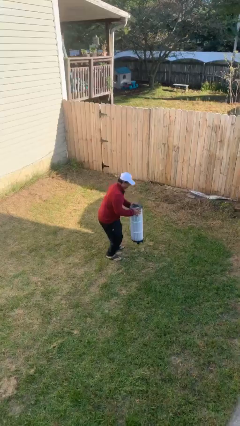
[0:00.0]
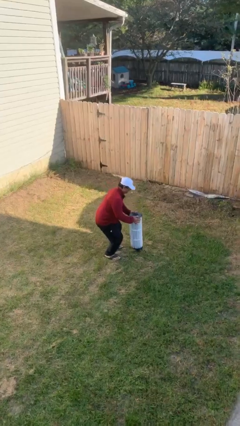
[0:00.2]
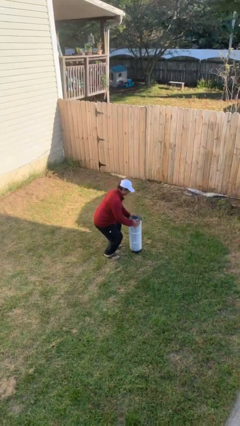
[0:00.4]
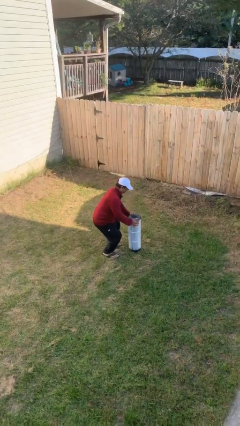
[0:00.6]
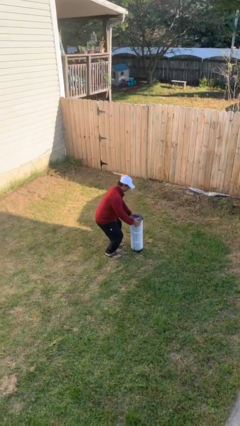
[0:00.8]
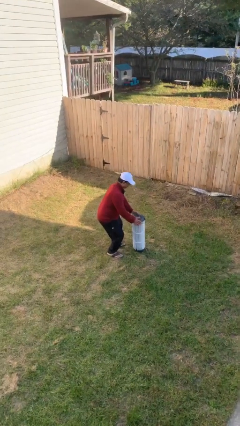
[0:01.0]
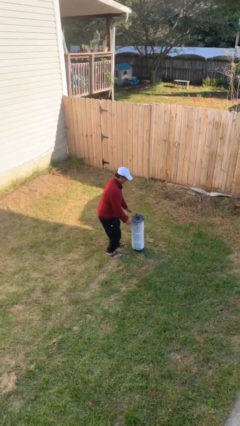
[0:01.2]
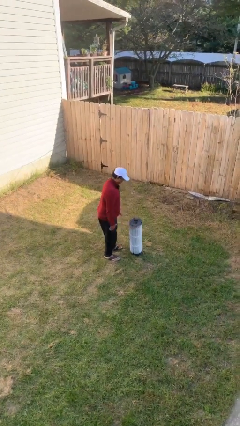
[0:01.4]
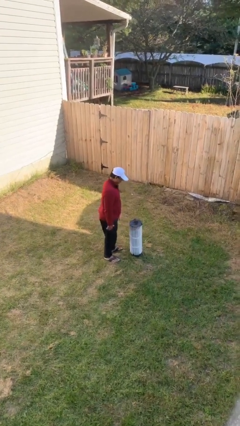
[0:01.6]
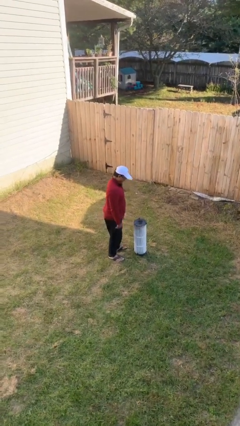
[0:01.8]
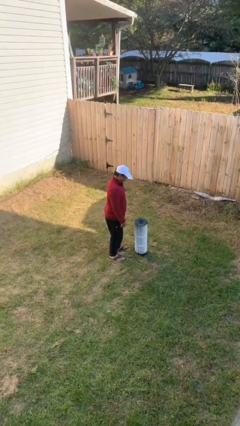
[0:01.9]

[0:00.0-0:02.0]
person puts down object on floor

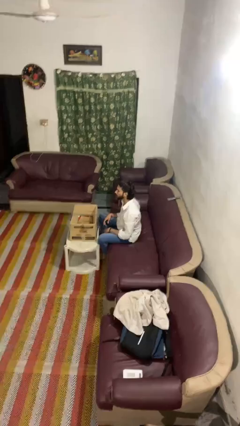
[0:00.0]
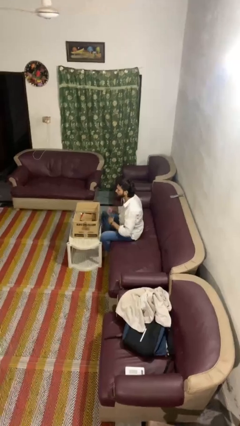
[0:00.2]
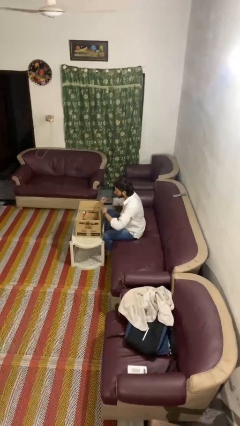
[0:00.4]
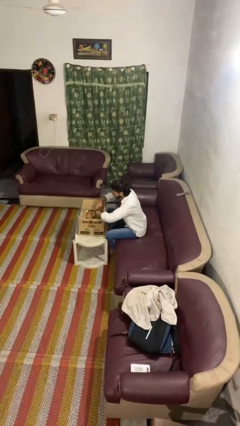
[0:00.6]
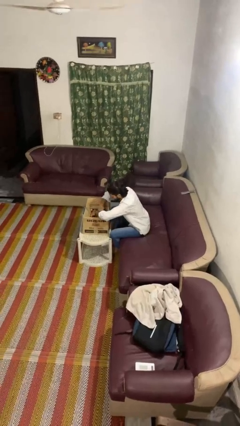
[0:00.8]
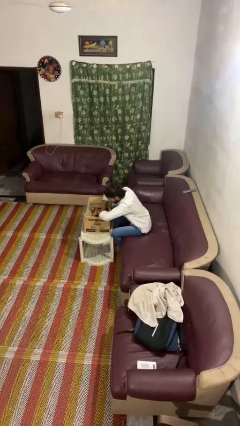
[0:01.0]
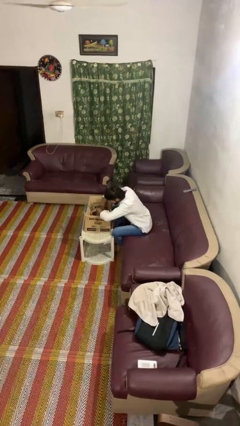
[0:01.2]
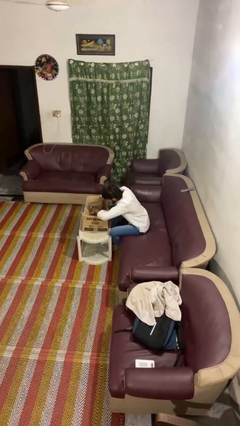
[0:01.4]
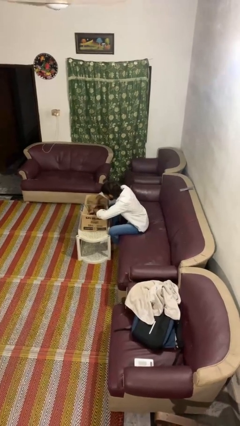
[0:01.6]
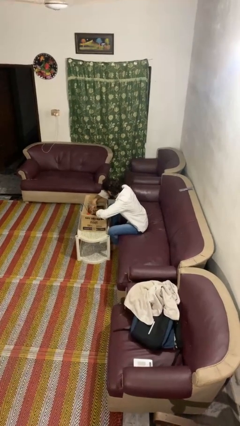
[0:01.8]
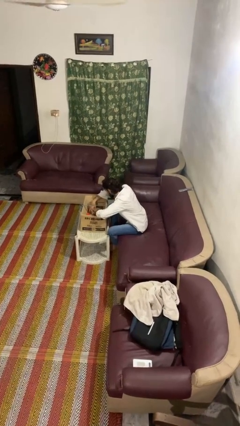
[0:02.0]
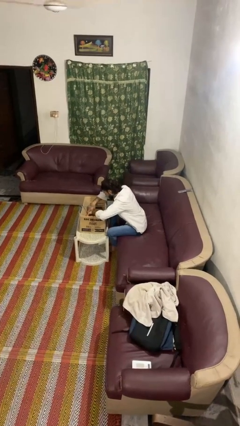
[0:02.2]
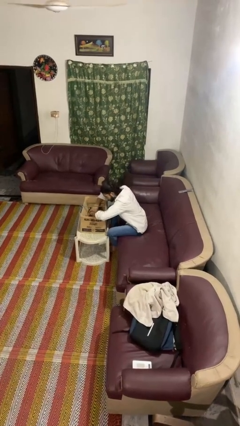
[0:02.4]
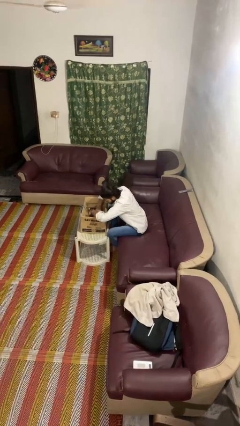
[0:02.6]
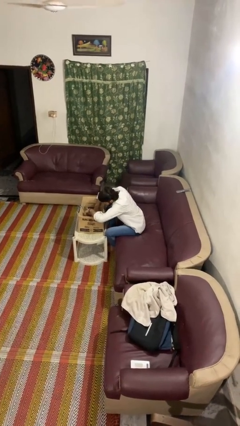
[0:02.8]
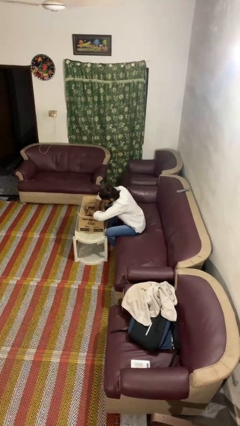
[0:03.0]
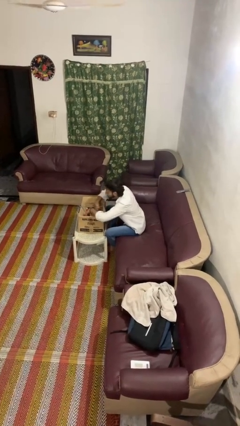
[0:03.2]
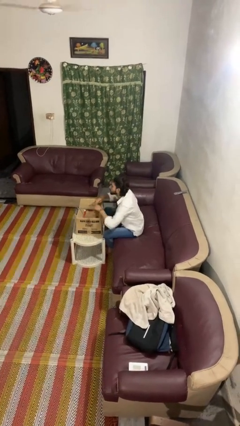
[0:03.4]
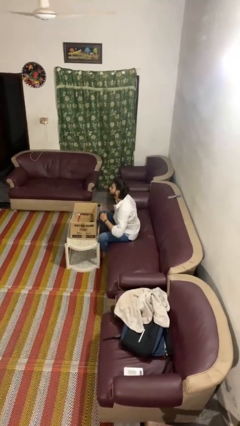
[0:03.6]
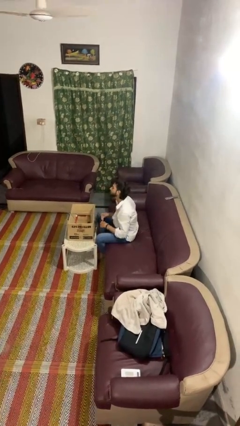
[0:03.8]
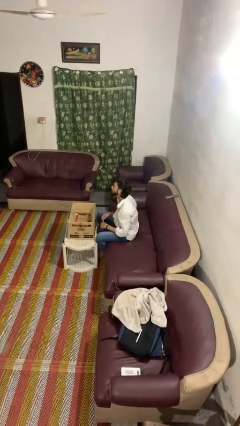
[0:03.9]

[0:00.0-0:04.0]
person searches in box

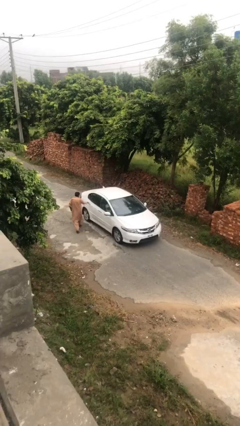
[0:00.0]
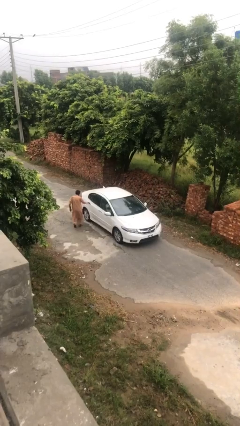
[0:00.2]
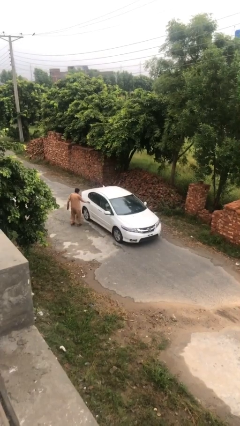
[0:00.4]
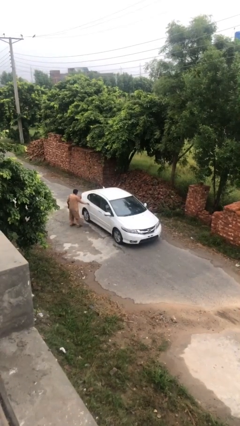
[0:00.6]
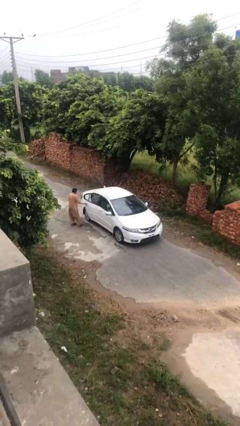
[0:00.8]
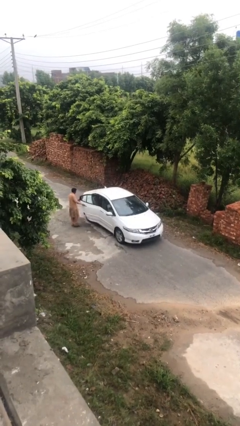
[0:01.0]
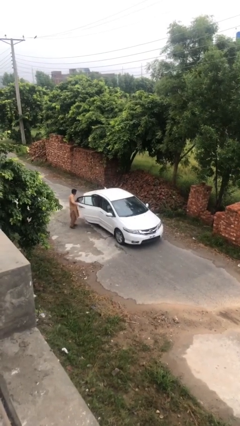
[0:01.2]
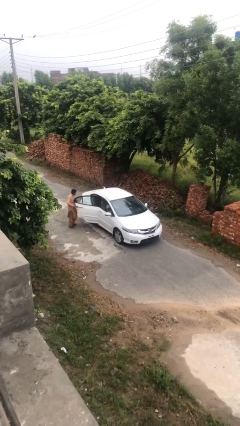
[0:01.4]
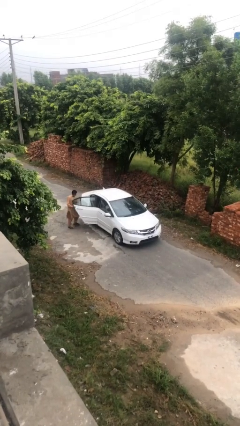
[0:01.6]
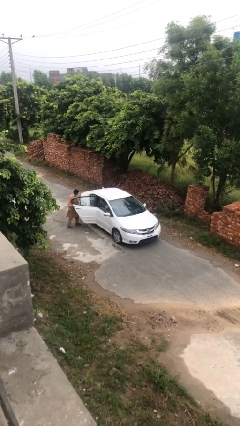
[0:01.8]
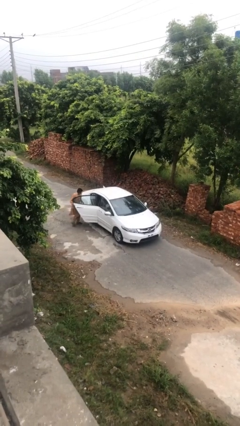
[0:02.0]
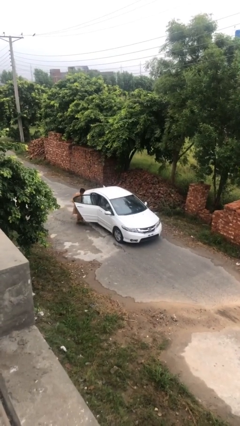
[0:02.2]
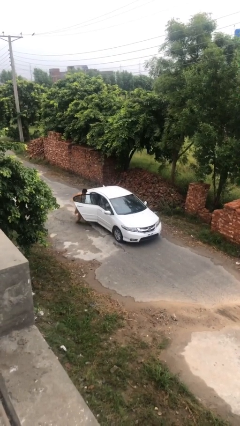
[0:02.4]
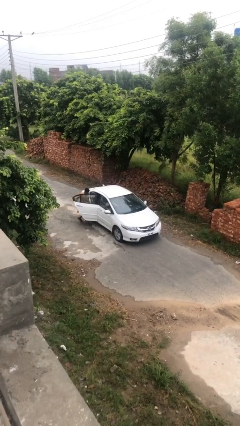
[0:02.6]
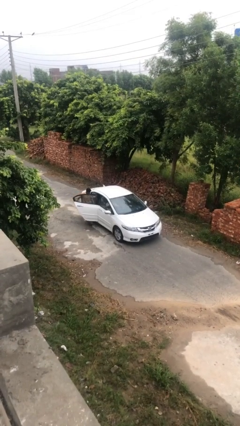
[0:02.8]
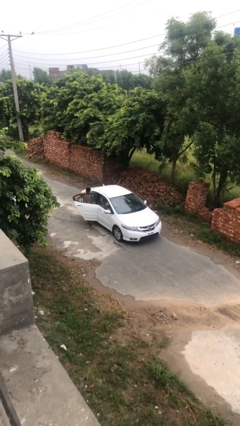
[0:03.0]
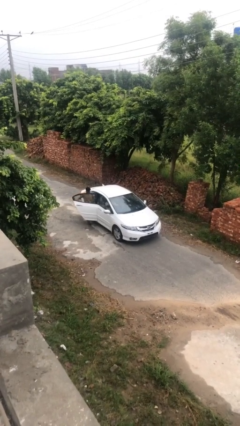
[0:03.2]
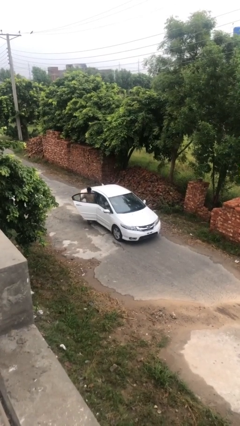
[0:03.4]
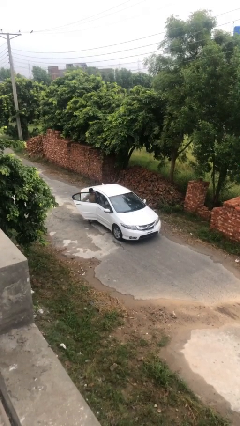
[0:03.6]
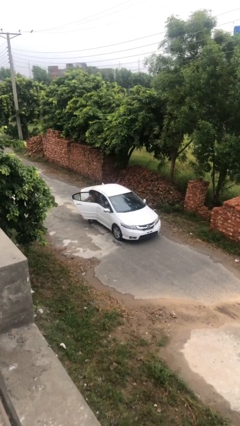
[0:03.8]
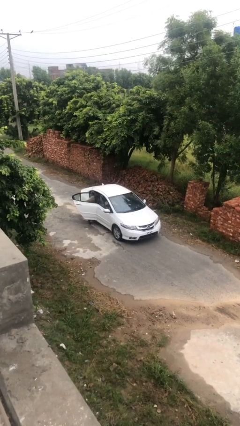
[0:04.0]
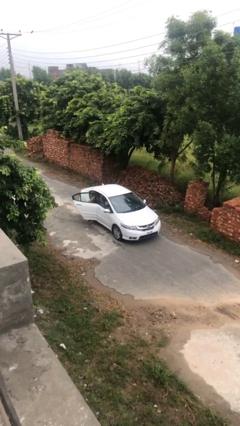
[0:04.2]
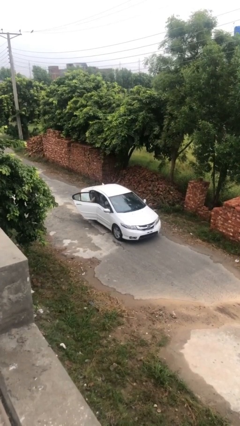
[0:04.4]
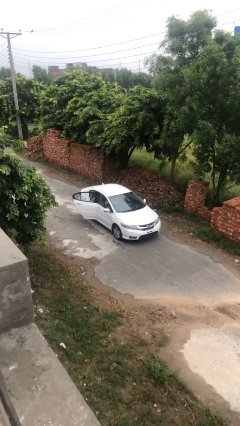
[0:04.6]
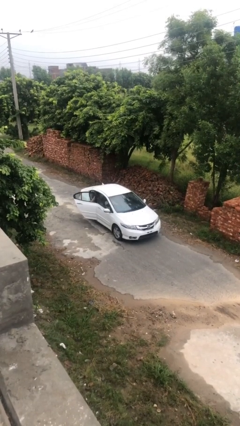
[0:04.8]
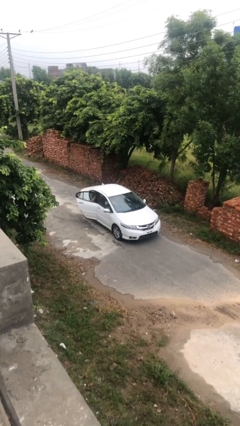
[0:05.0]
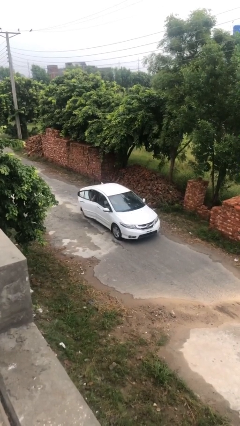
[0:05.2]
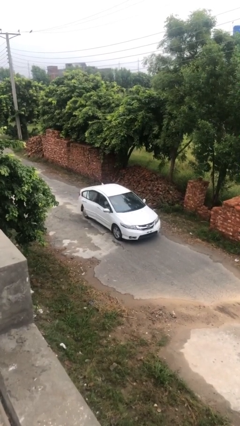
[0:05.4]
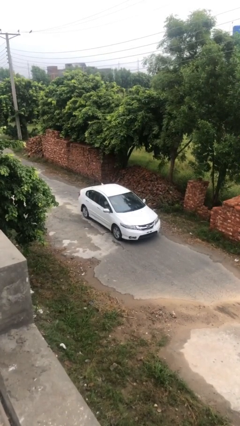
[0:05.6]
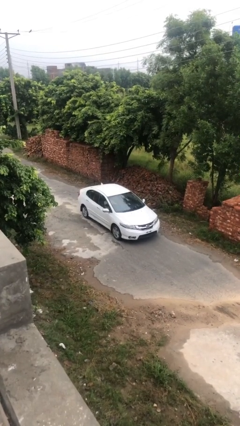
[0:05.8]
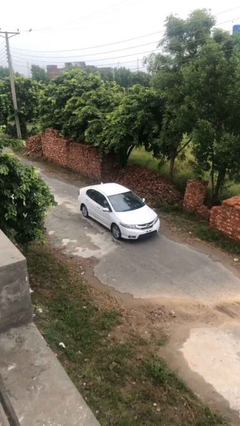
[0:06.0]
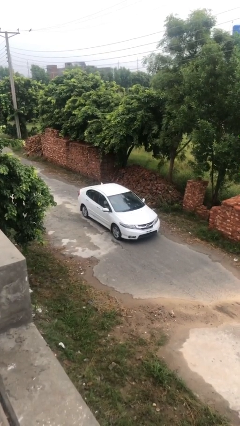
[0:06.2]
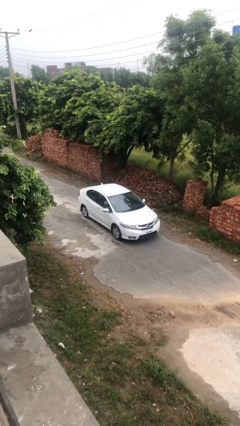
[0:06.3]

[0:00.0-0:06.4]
car picks up person

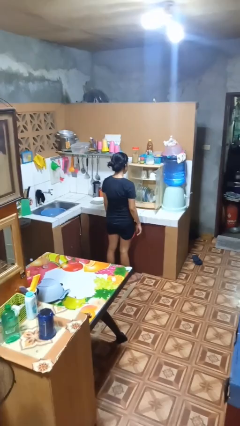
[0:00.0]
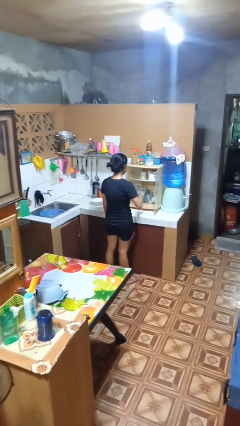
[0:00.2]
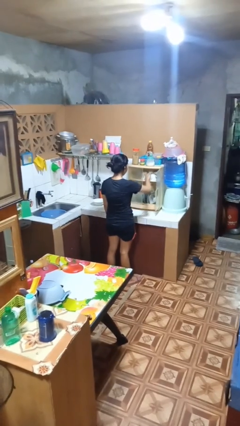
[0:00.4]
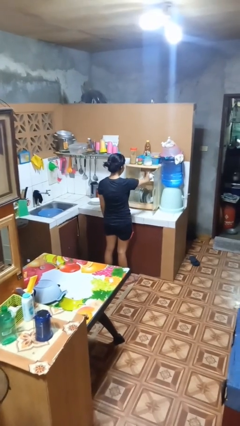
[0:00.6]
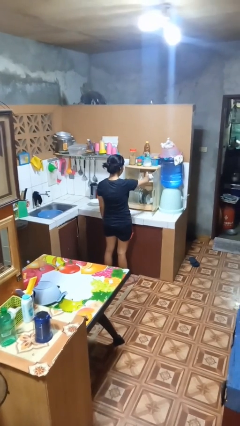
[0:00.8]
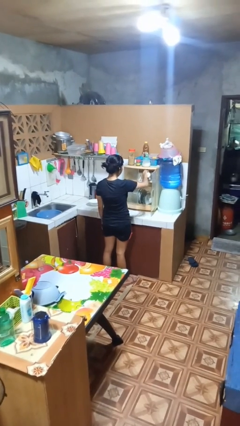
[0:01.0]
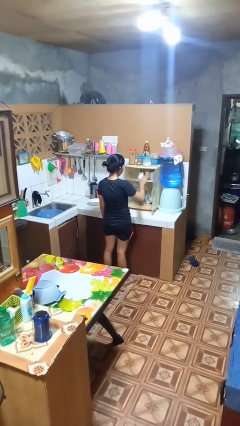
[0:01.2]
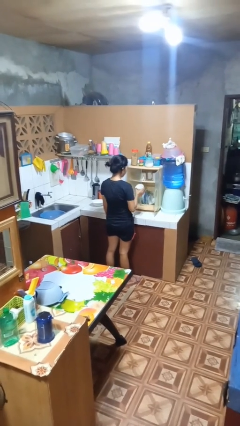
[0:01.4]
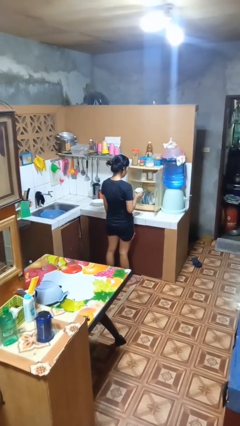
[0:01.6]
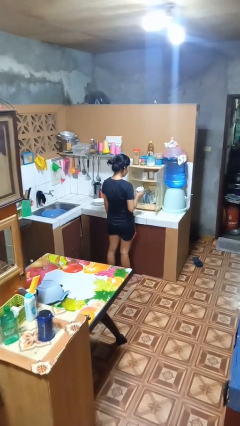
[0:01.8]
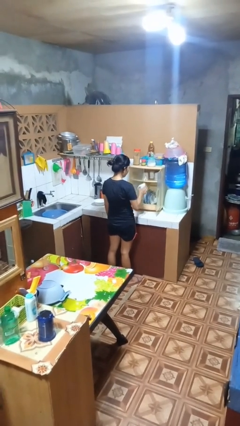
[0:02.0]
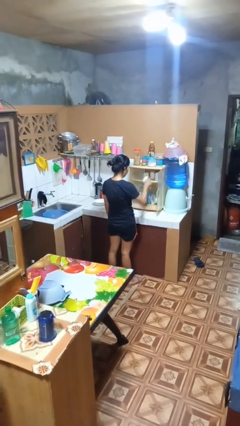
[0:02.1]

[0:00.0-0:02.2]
person takes object from kitchen drawer

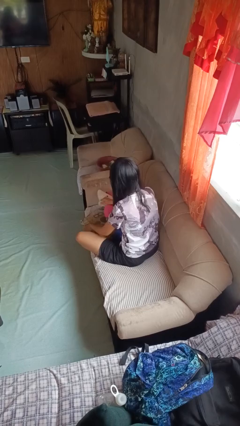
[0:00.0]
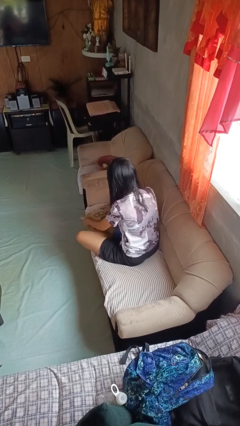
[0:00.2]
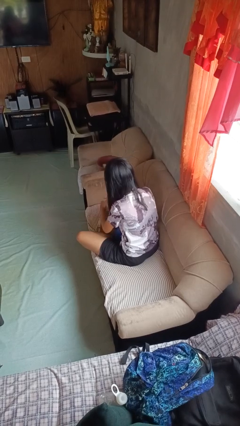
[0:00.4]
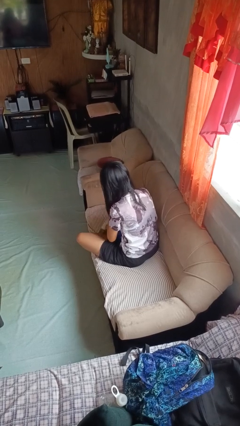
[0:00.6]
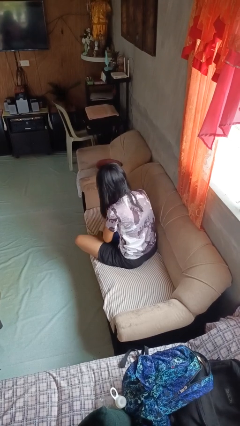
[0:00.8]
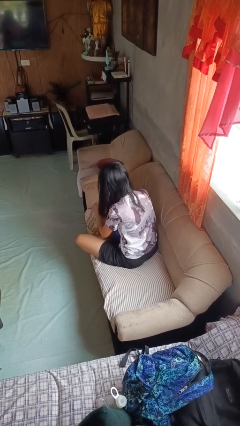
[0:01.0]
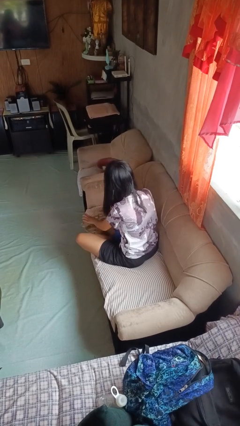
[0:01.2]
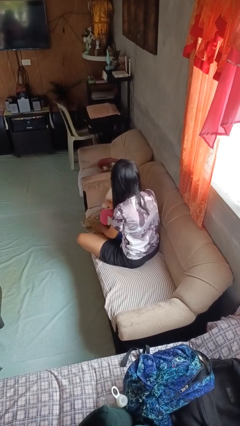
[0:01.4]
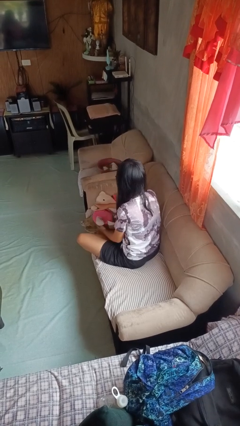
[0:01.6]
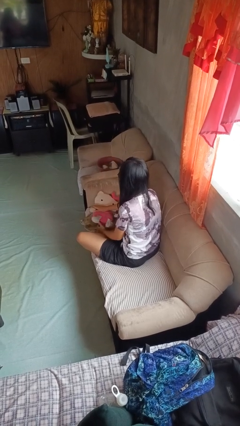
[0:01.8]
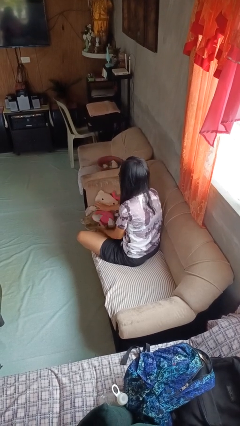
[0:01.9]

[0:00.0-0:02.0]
person searches in couch

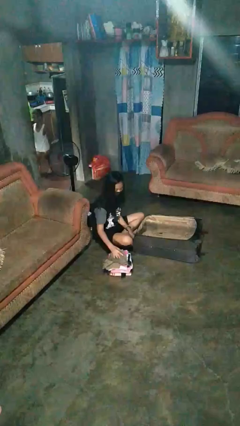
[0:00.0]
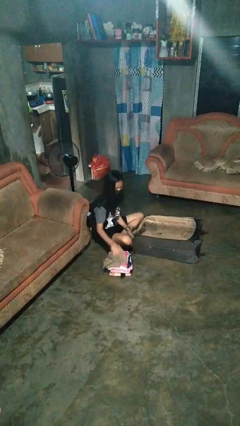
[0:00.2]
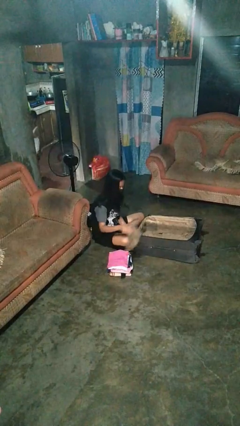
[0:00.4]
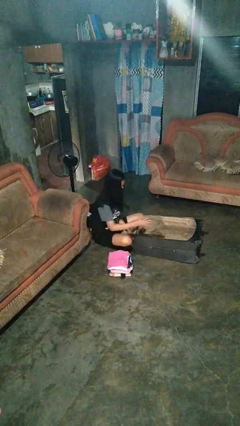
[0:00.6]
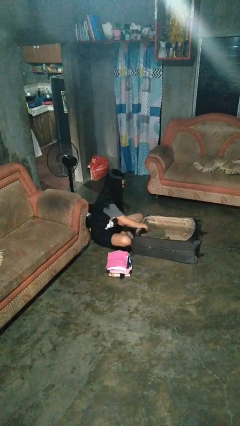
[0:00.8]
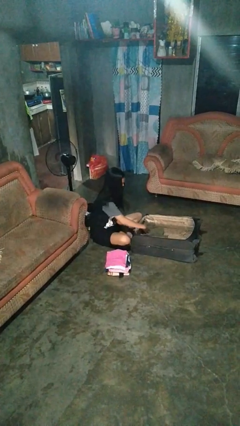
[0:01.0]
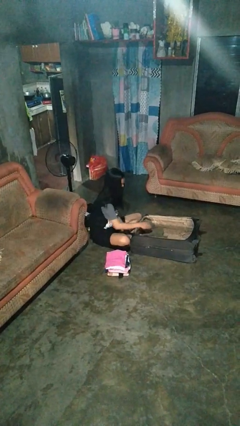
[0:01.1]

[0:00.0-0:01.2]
person loads clothes into suitcase
